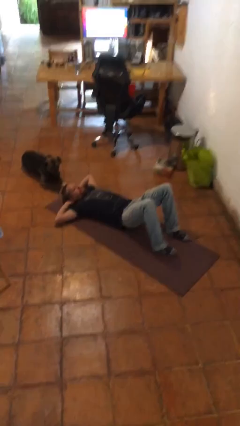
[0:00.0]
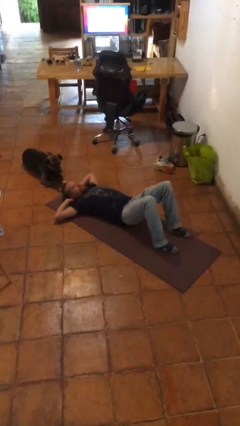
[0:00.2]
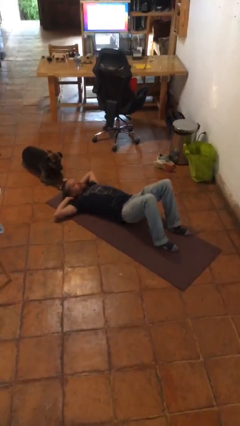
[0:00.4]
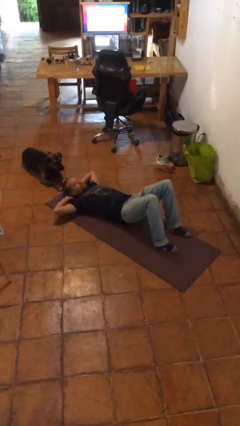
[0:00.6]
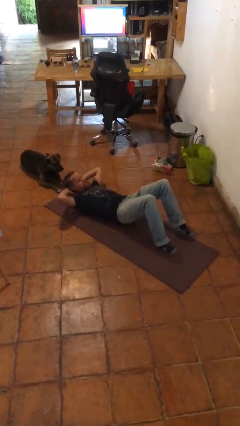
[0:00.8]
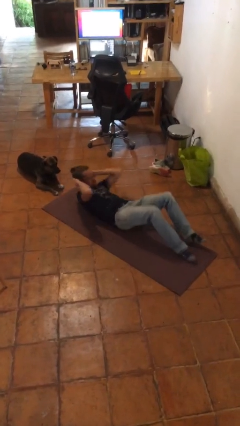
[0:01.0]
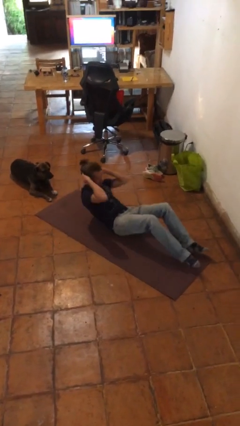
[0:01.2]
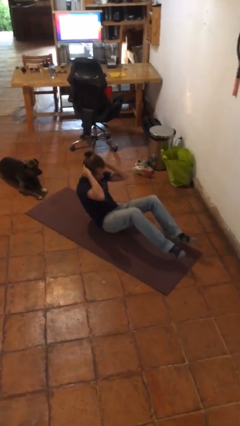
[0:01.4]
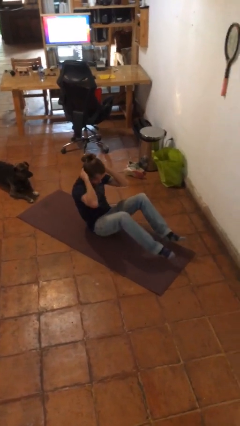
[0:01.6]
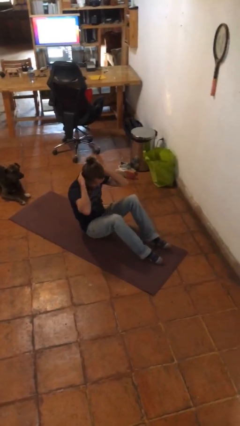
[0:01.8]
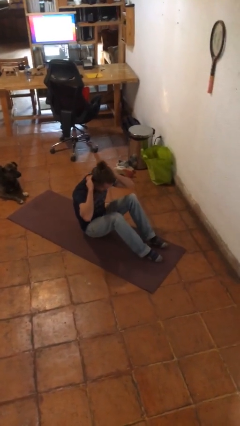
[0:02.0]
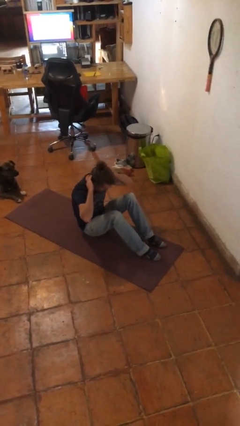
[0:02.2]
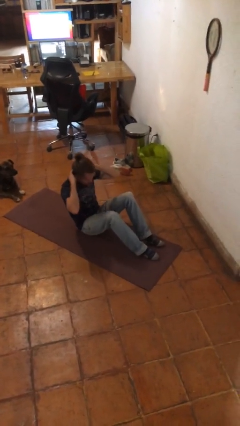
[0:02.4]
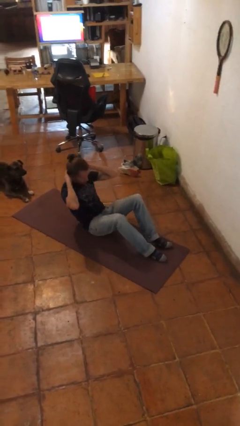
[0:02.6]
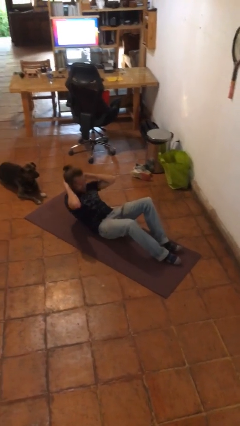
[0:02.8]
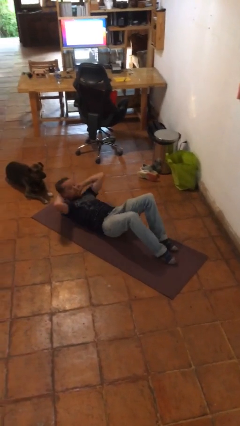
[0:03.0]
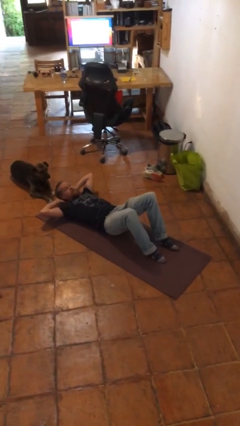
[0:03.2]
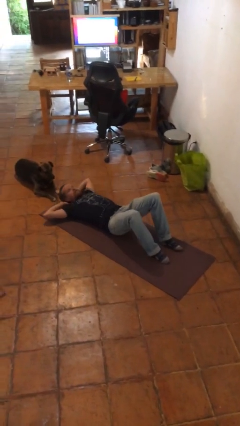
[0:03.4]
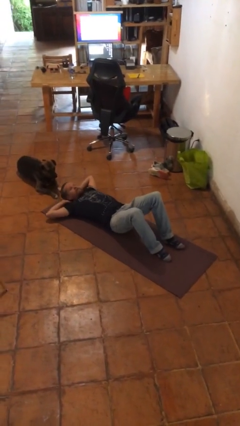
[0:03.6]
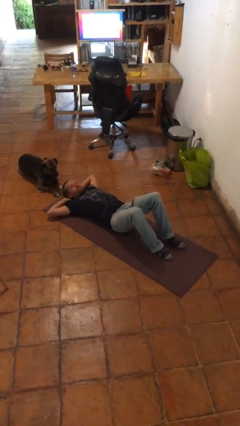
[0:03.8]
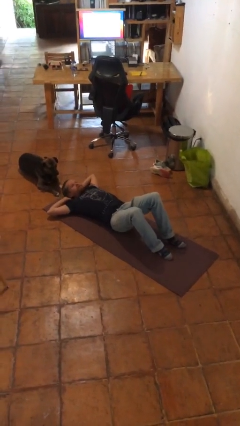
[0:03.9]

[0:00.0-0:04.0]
person exercises with situp

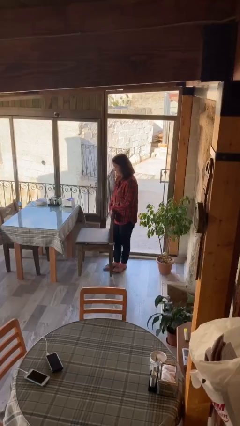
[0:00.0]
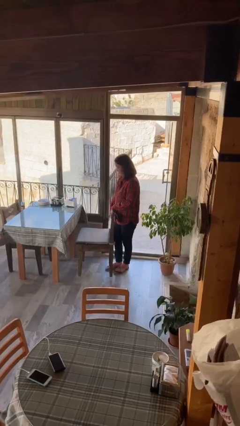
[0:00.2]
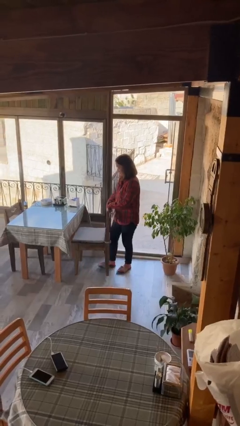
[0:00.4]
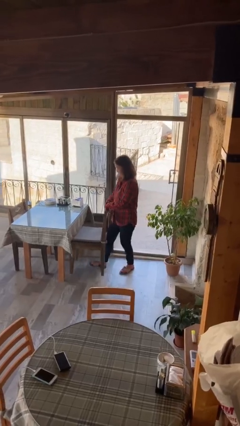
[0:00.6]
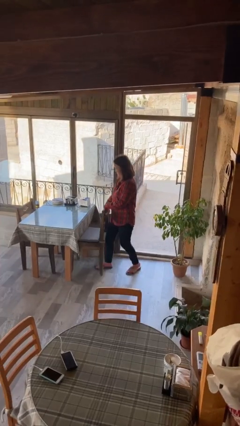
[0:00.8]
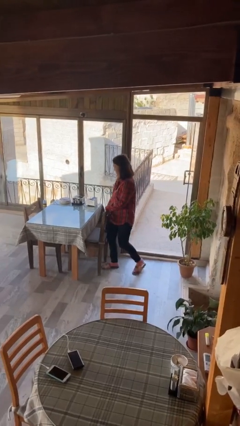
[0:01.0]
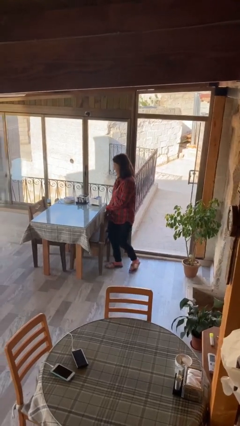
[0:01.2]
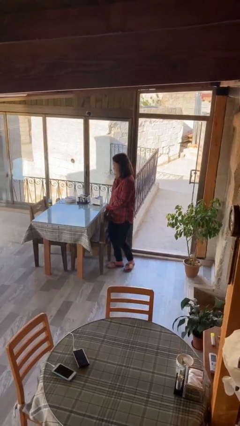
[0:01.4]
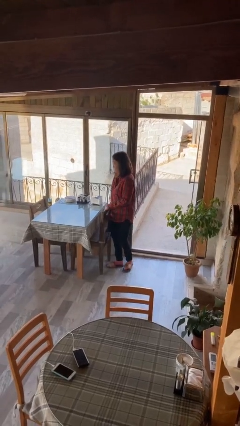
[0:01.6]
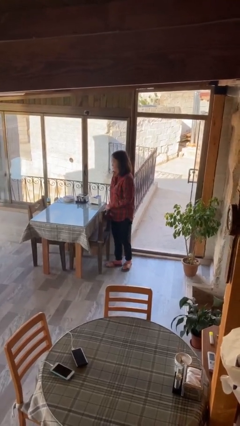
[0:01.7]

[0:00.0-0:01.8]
person pushes in chair

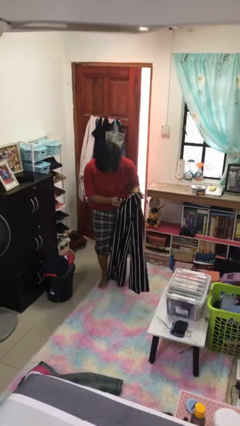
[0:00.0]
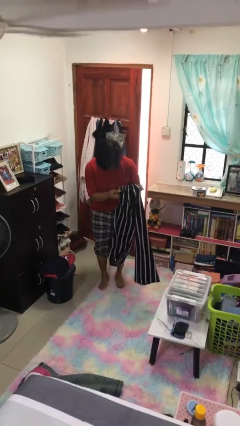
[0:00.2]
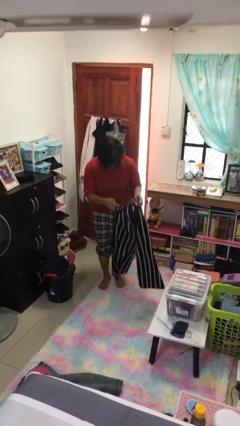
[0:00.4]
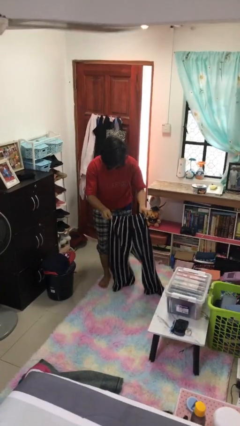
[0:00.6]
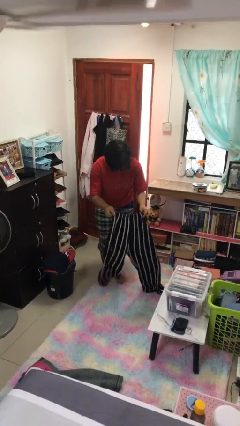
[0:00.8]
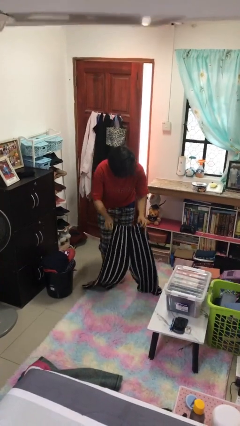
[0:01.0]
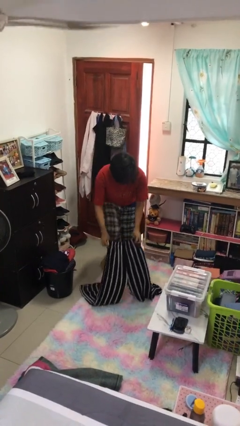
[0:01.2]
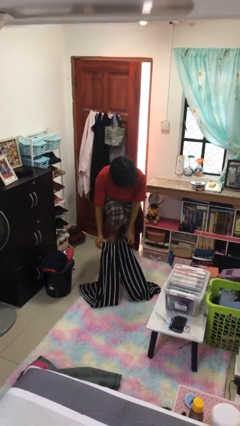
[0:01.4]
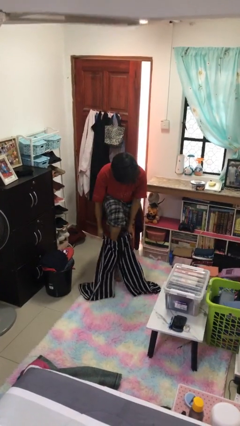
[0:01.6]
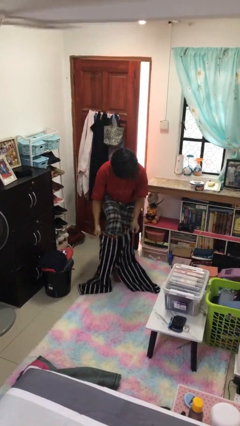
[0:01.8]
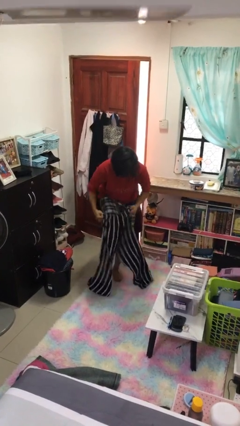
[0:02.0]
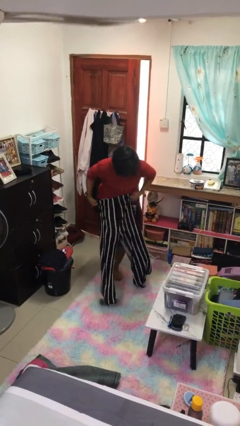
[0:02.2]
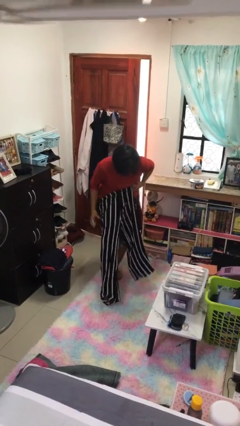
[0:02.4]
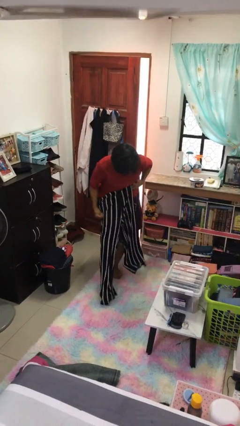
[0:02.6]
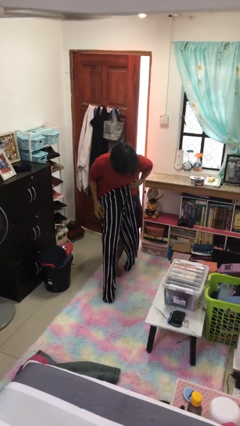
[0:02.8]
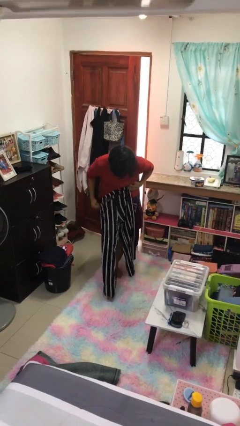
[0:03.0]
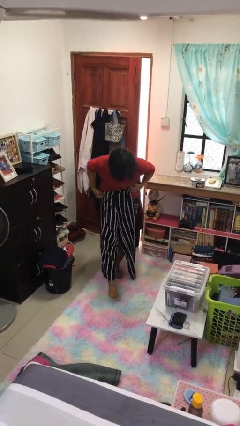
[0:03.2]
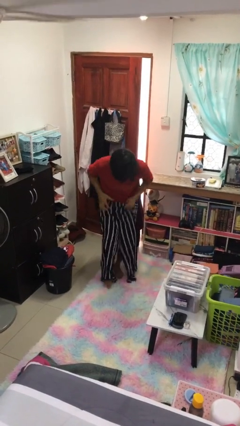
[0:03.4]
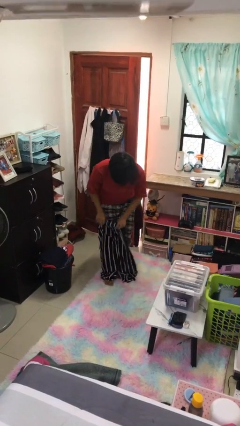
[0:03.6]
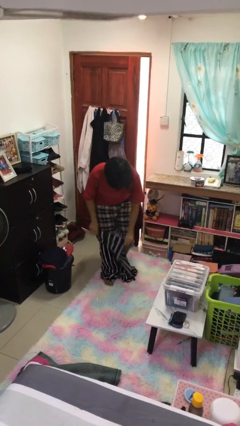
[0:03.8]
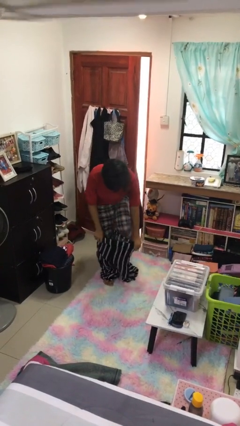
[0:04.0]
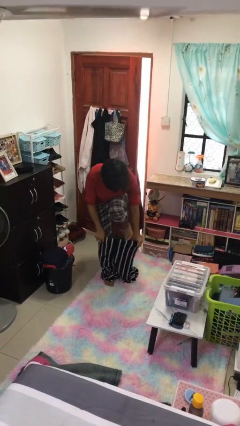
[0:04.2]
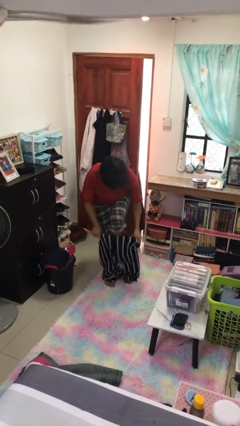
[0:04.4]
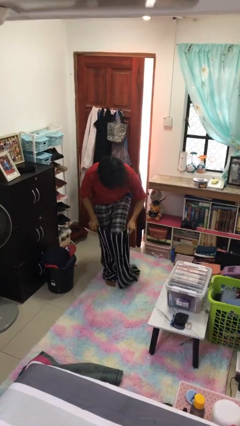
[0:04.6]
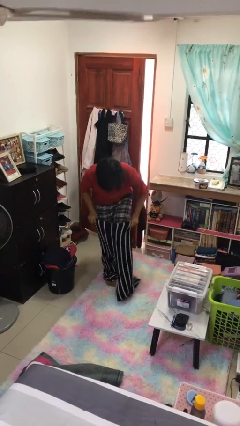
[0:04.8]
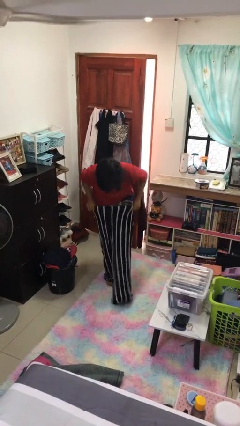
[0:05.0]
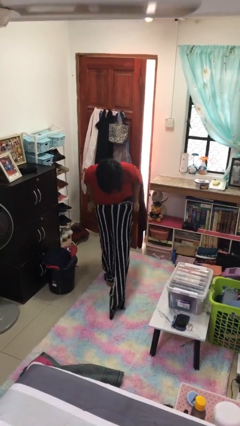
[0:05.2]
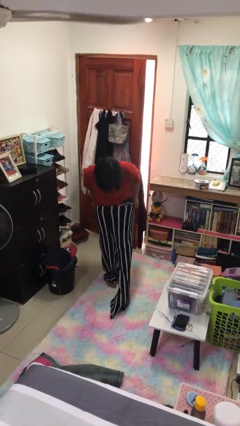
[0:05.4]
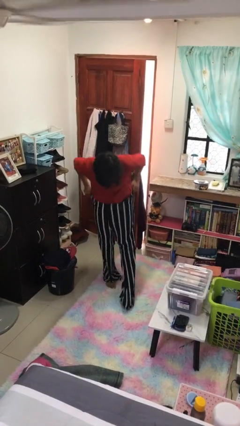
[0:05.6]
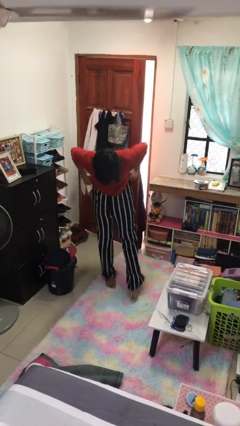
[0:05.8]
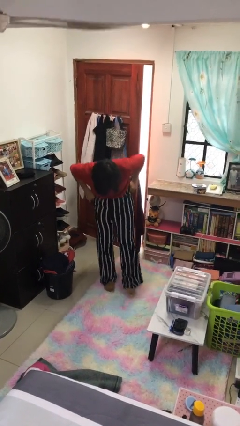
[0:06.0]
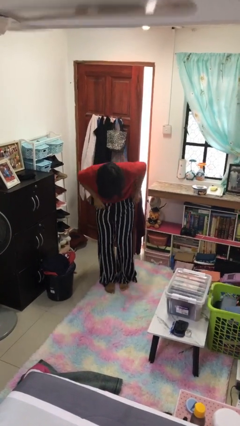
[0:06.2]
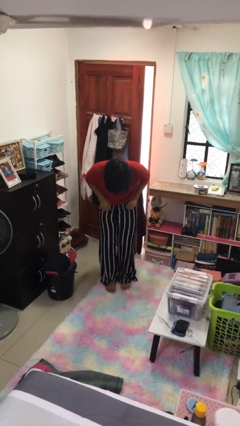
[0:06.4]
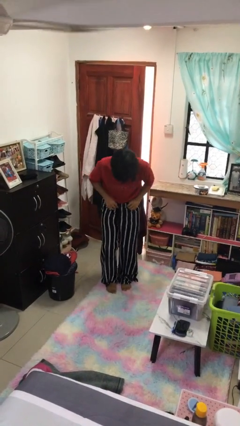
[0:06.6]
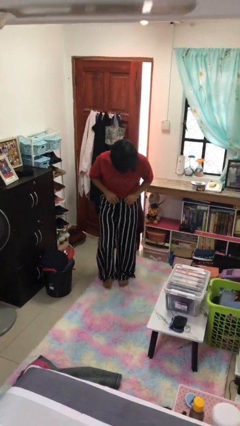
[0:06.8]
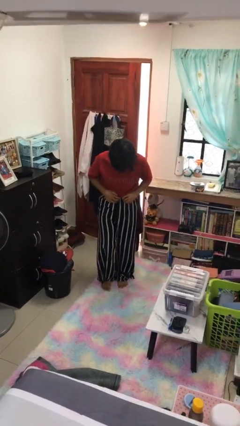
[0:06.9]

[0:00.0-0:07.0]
person puts on pants

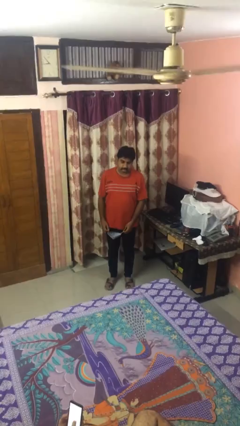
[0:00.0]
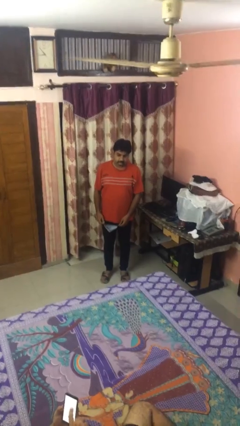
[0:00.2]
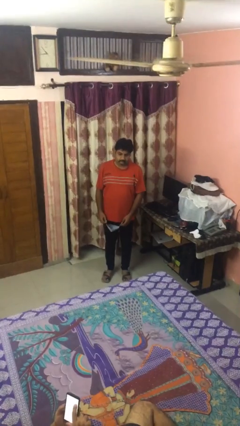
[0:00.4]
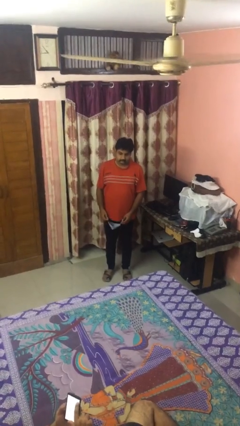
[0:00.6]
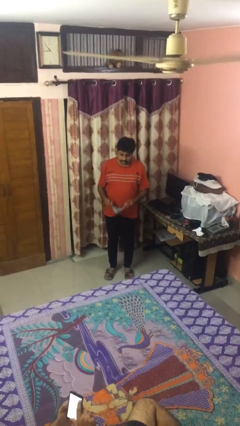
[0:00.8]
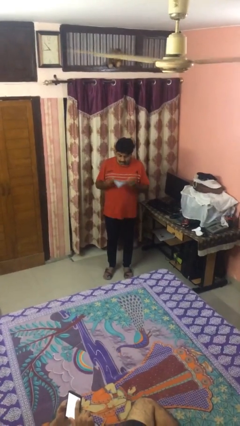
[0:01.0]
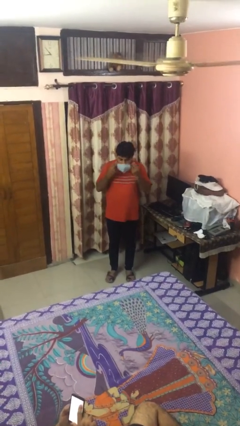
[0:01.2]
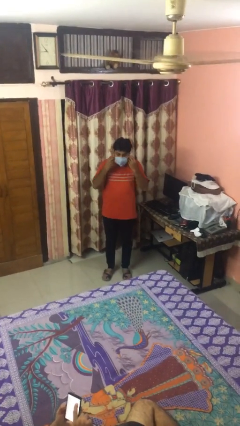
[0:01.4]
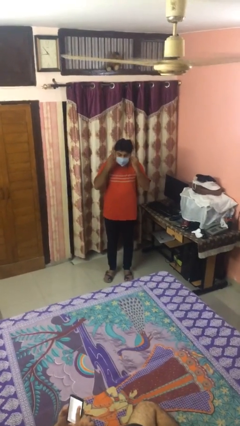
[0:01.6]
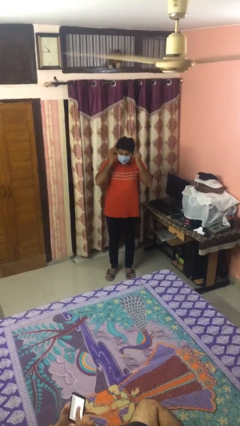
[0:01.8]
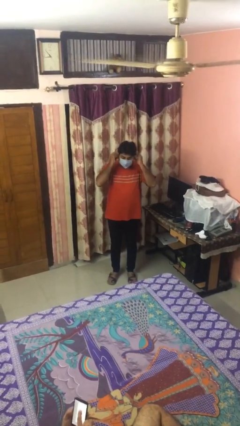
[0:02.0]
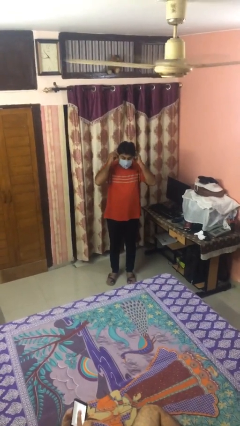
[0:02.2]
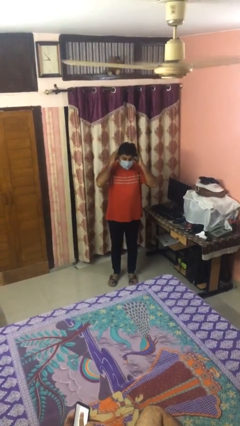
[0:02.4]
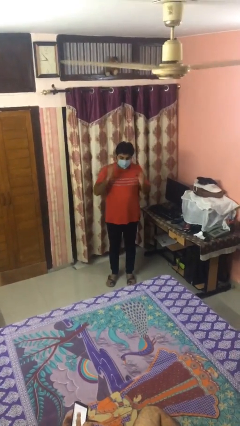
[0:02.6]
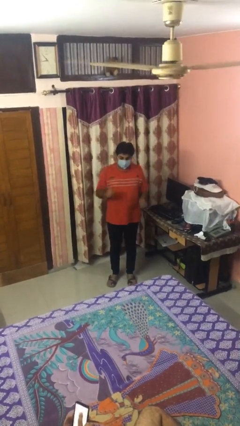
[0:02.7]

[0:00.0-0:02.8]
person puts on facemask

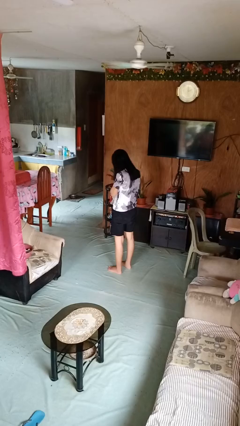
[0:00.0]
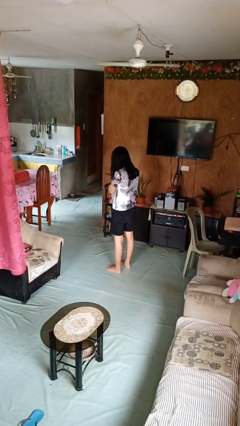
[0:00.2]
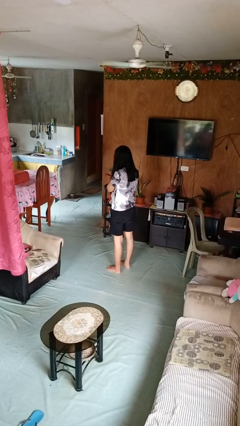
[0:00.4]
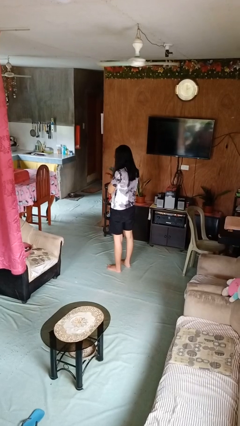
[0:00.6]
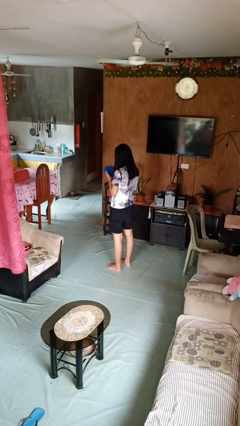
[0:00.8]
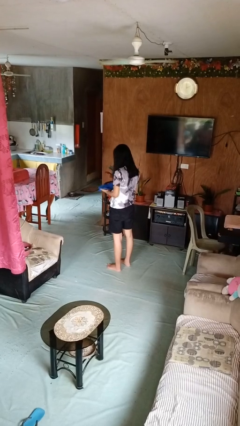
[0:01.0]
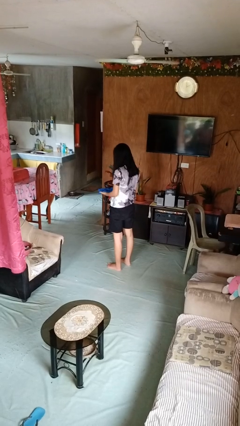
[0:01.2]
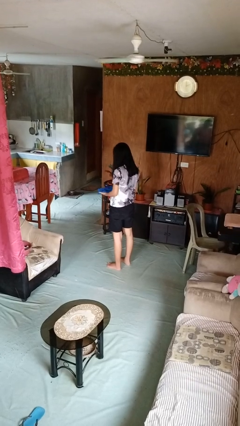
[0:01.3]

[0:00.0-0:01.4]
person blows nose

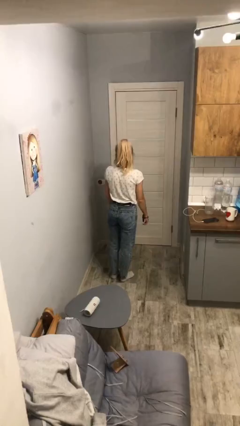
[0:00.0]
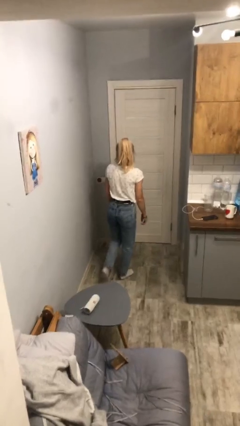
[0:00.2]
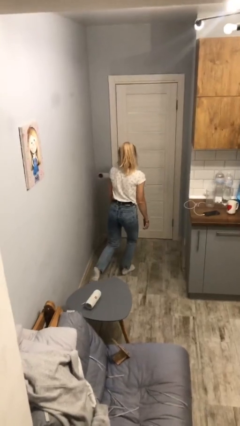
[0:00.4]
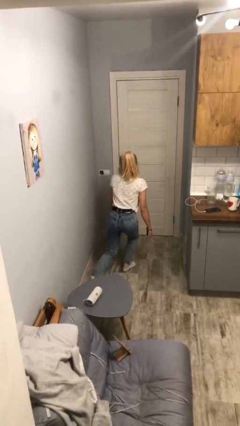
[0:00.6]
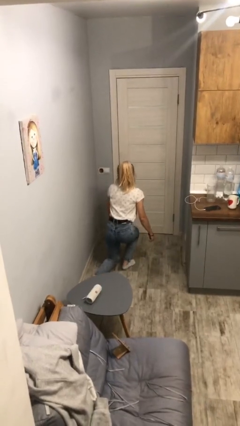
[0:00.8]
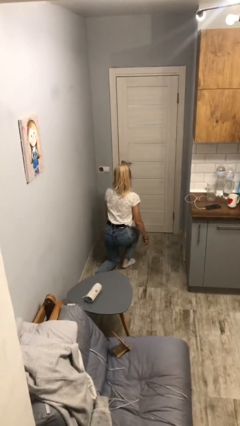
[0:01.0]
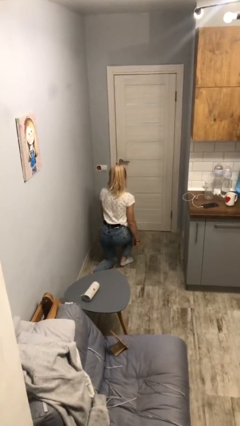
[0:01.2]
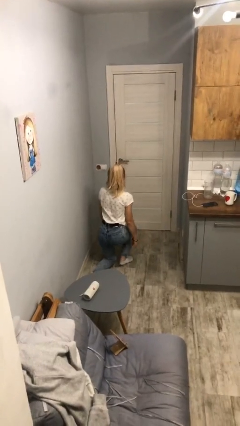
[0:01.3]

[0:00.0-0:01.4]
person kneels
